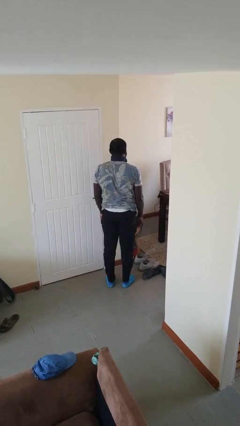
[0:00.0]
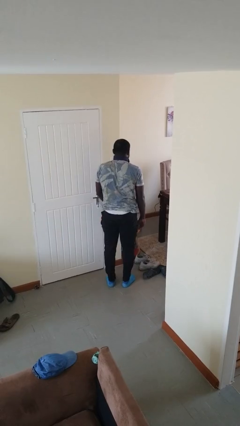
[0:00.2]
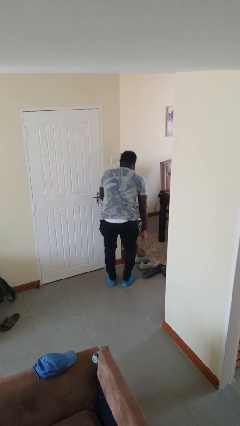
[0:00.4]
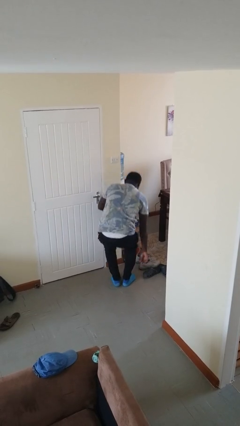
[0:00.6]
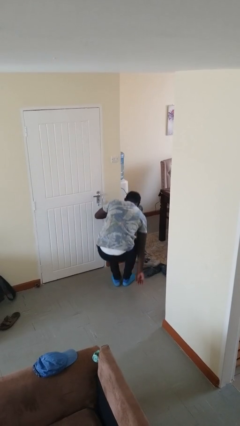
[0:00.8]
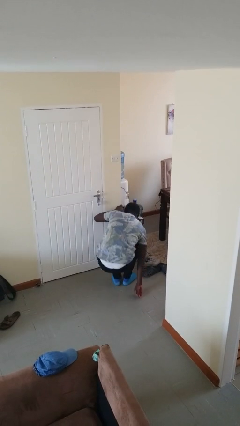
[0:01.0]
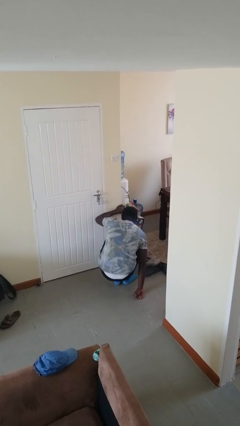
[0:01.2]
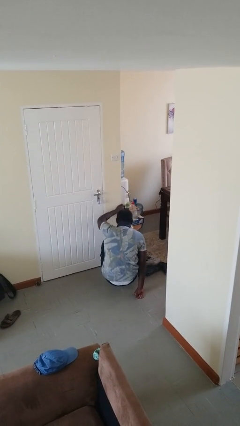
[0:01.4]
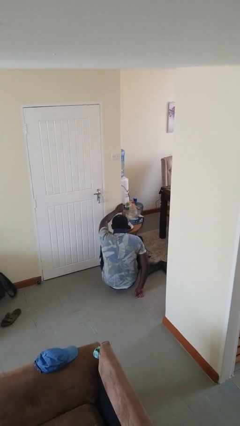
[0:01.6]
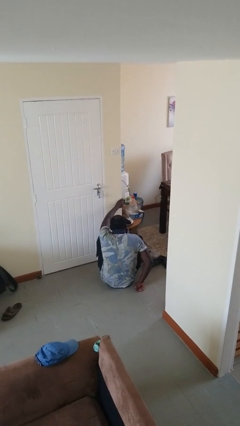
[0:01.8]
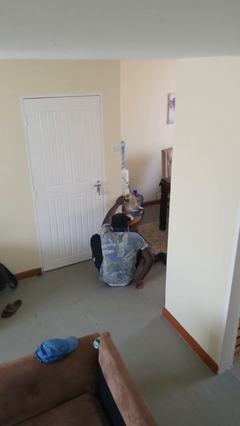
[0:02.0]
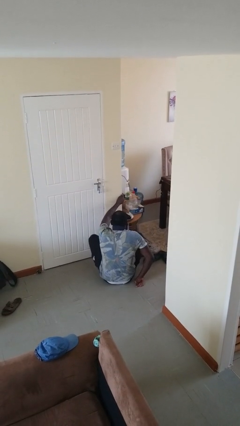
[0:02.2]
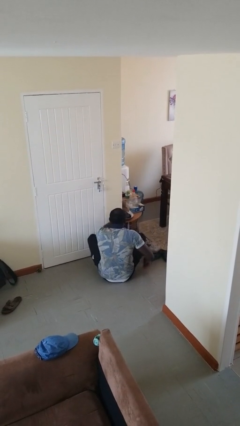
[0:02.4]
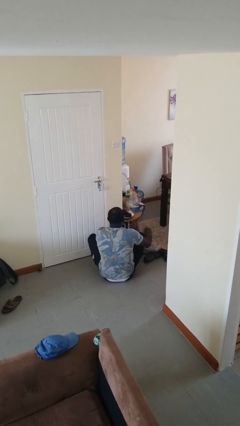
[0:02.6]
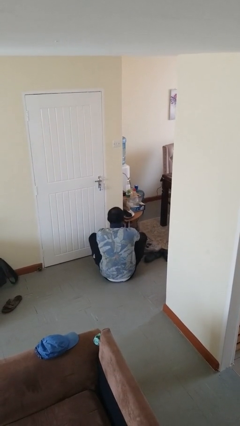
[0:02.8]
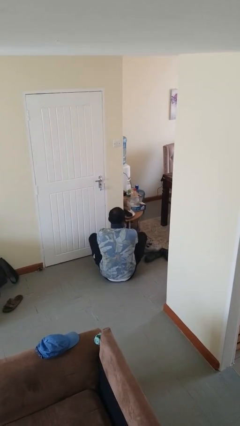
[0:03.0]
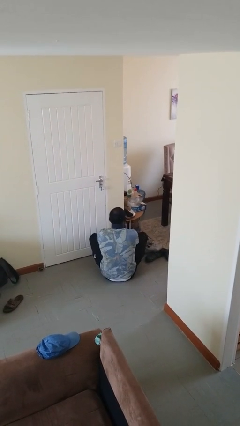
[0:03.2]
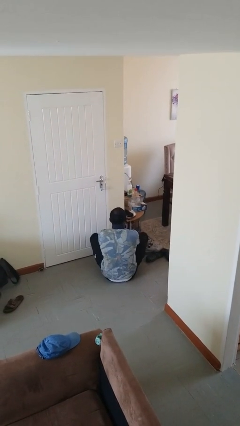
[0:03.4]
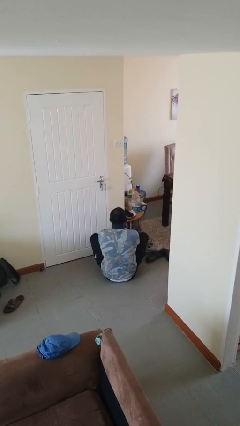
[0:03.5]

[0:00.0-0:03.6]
person sits crisscross

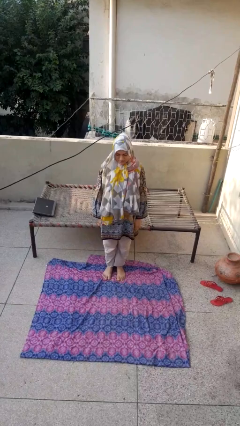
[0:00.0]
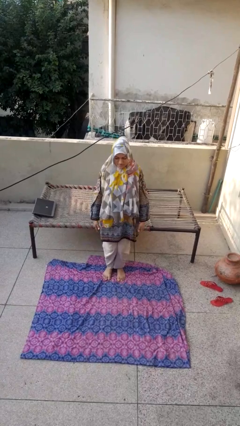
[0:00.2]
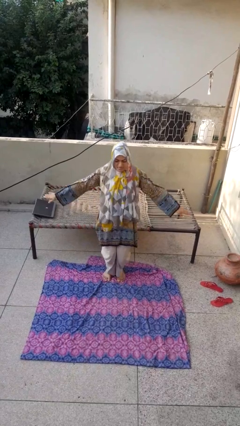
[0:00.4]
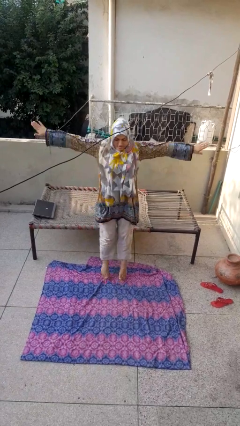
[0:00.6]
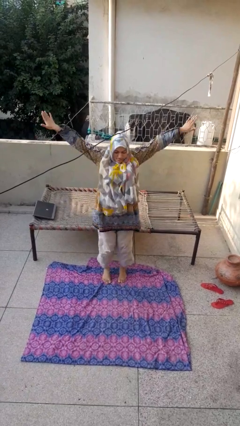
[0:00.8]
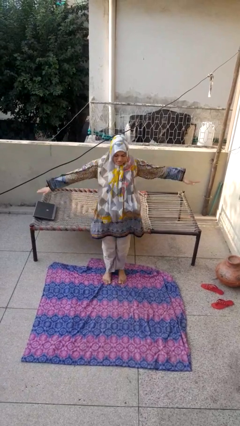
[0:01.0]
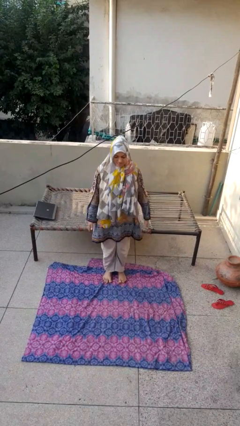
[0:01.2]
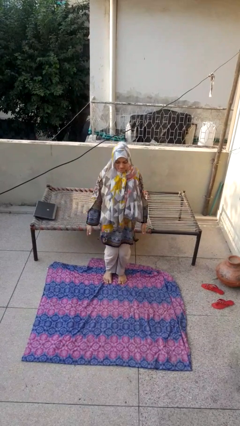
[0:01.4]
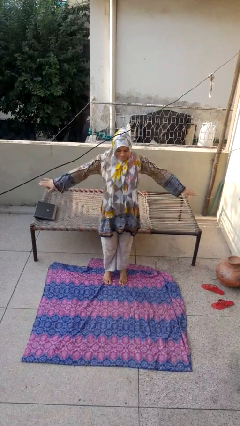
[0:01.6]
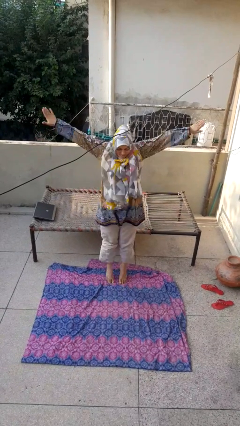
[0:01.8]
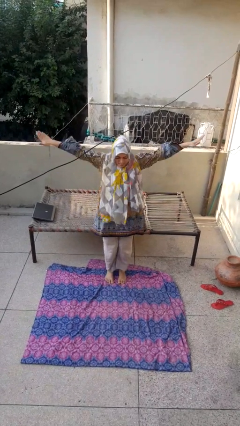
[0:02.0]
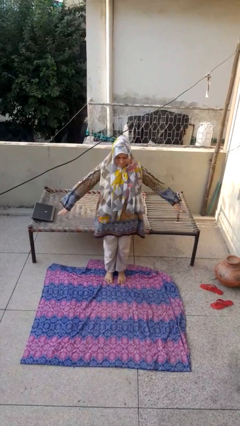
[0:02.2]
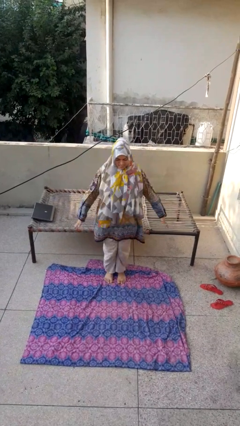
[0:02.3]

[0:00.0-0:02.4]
person exercises with jumping jacks

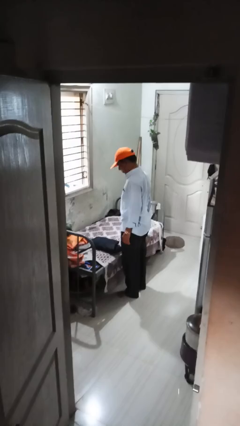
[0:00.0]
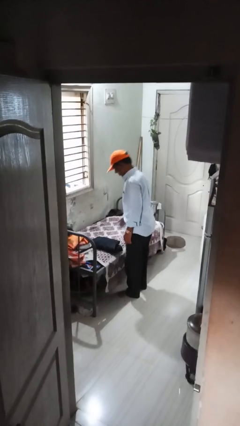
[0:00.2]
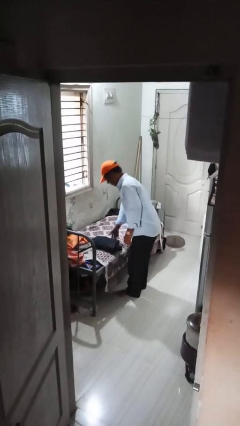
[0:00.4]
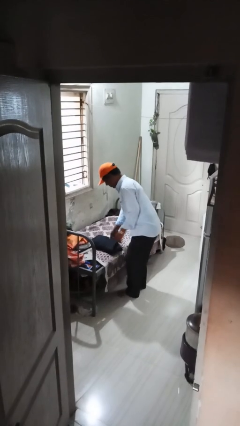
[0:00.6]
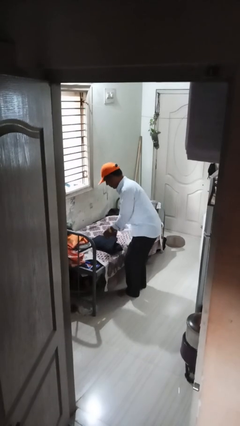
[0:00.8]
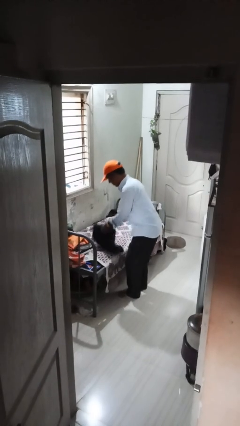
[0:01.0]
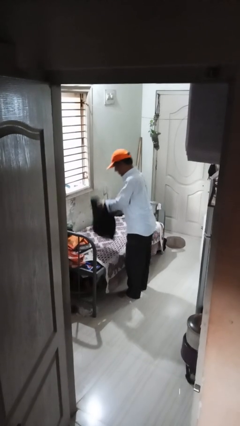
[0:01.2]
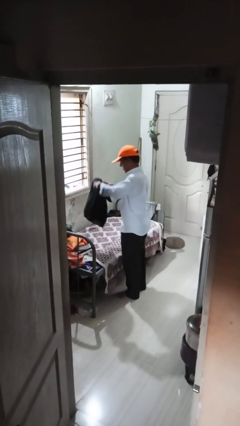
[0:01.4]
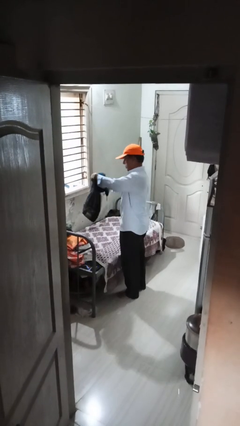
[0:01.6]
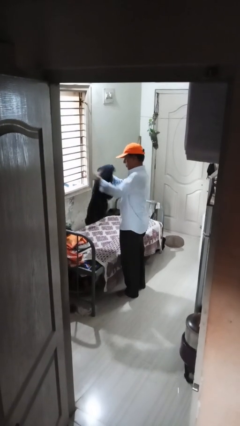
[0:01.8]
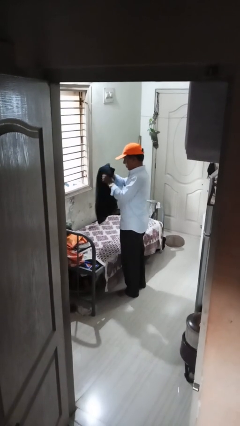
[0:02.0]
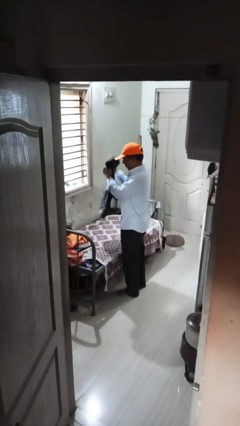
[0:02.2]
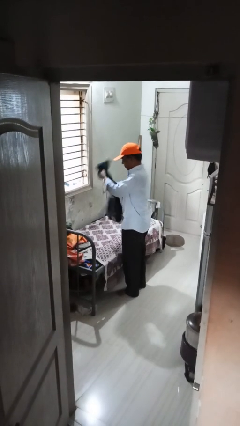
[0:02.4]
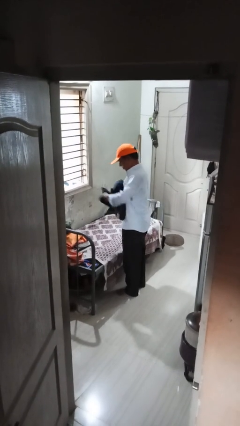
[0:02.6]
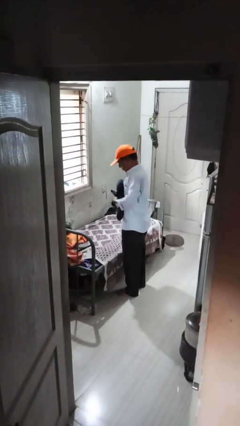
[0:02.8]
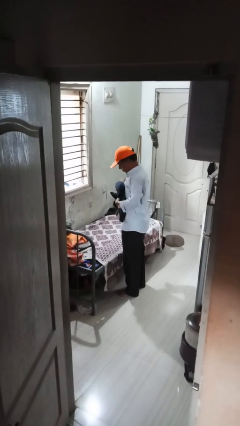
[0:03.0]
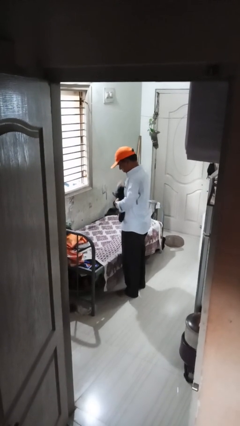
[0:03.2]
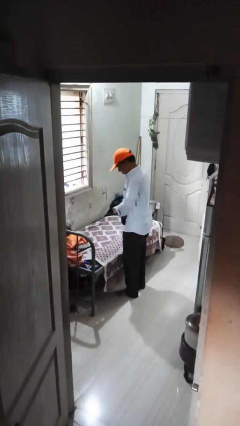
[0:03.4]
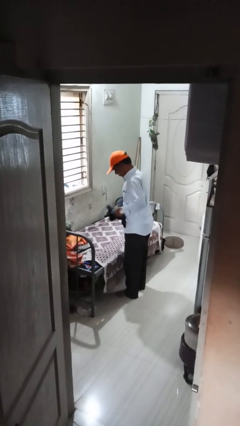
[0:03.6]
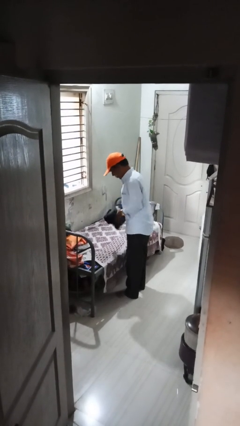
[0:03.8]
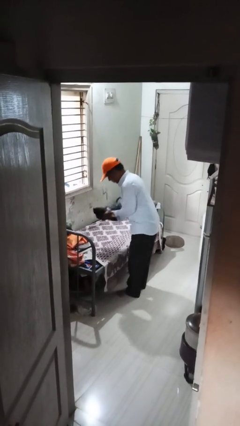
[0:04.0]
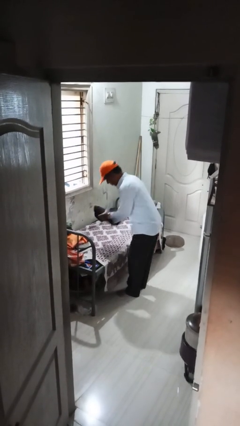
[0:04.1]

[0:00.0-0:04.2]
person folds pants

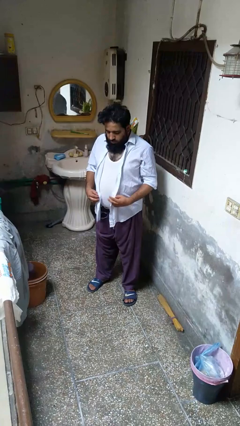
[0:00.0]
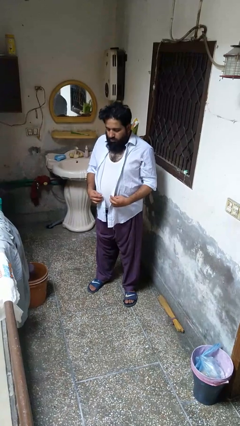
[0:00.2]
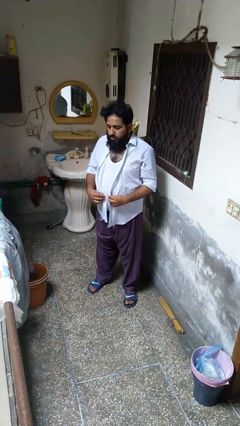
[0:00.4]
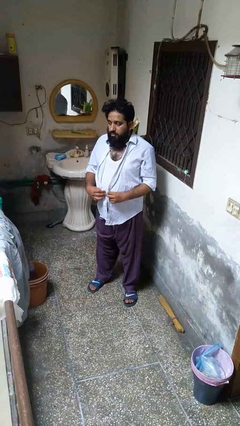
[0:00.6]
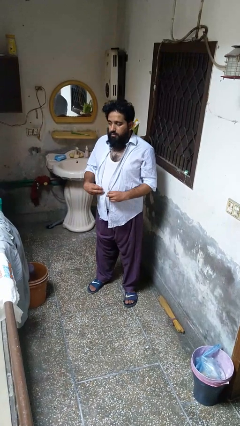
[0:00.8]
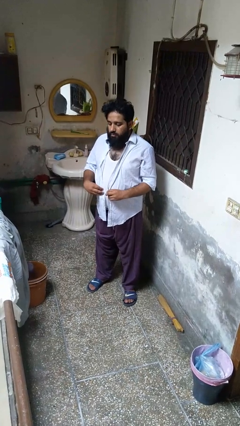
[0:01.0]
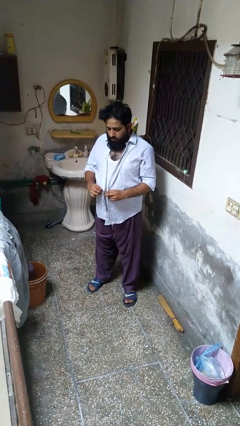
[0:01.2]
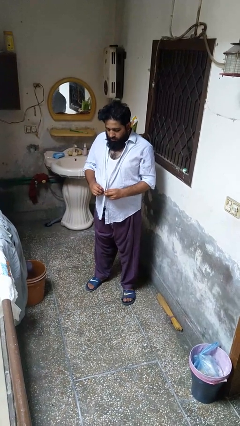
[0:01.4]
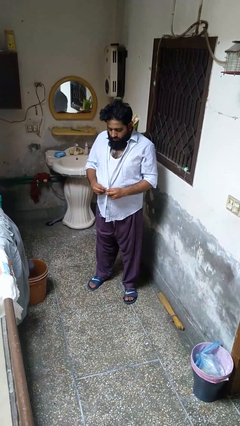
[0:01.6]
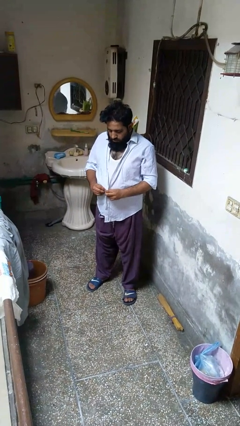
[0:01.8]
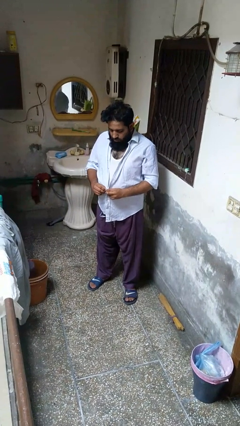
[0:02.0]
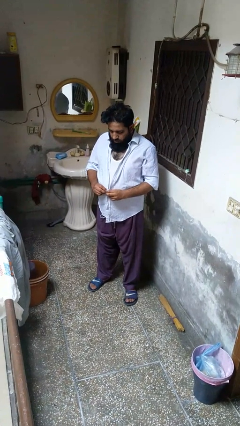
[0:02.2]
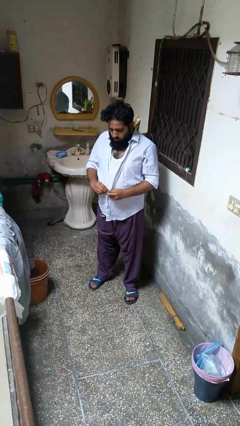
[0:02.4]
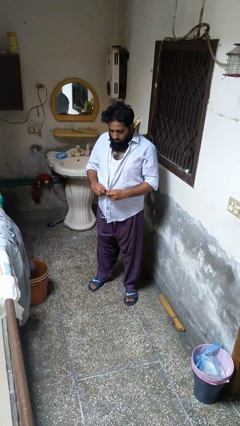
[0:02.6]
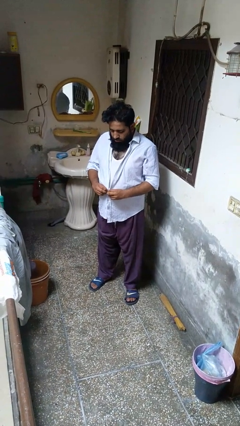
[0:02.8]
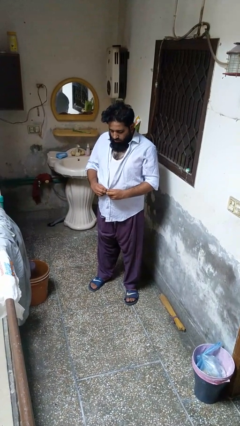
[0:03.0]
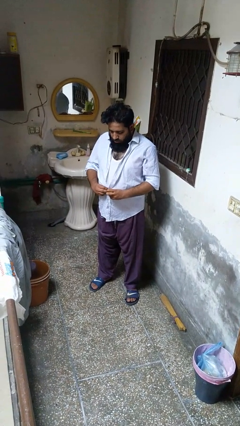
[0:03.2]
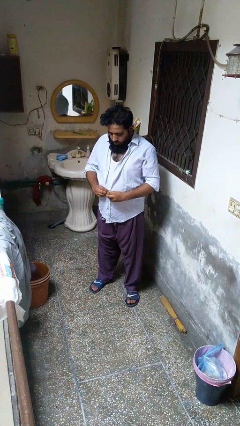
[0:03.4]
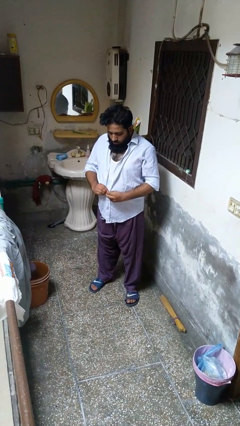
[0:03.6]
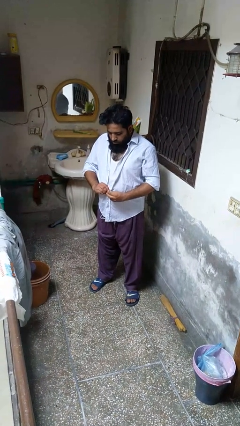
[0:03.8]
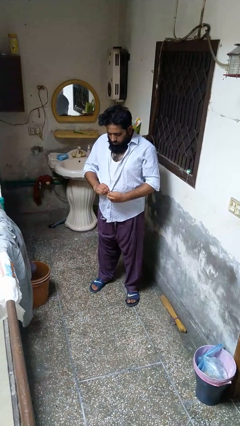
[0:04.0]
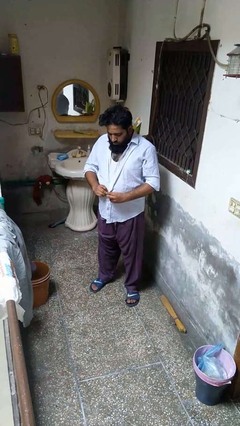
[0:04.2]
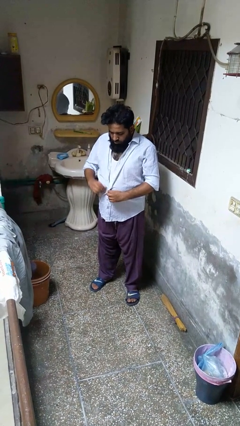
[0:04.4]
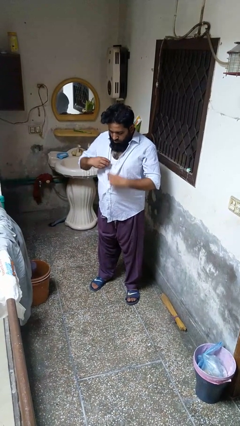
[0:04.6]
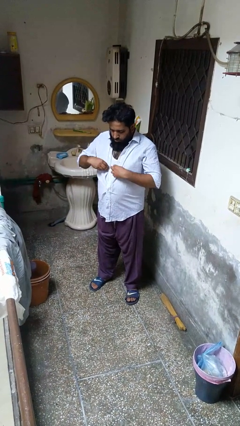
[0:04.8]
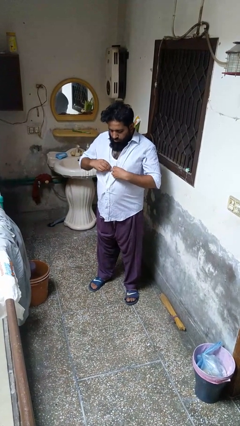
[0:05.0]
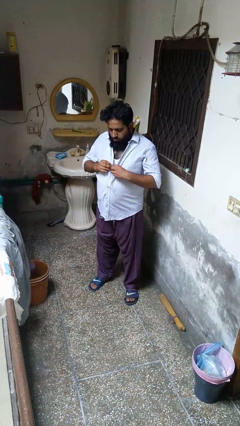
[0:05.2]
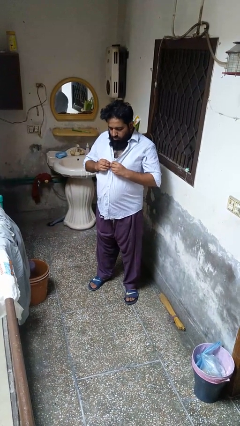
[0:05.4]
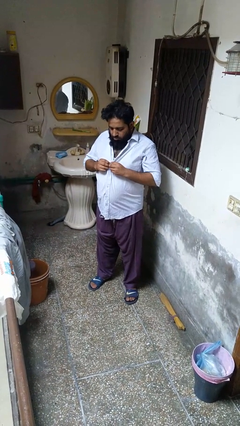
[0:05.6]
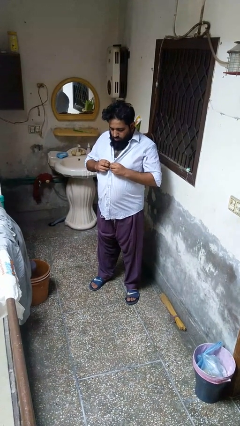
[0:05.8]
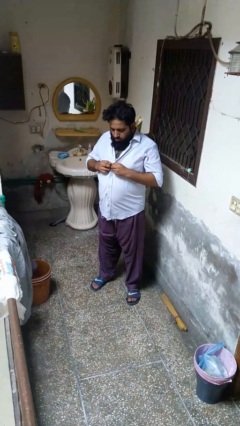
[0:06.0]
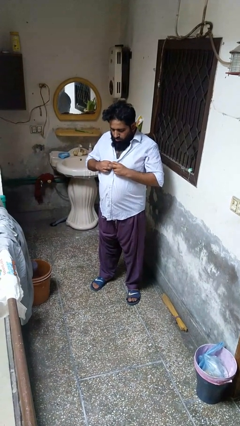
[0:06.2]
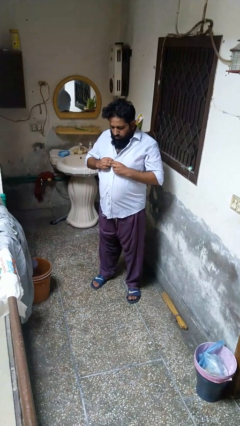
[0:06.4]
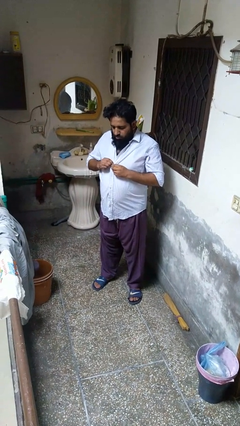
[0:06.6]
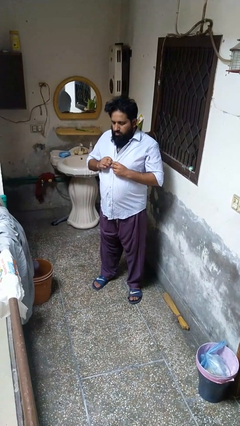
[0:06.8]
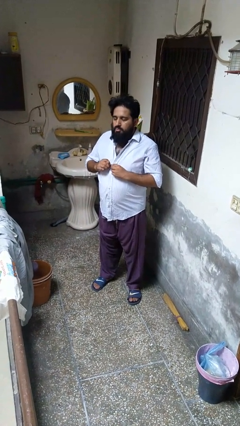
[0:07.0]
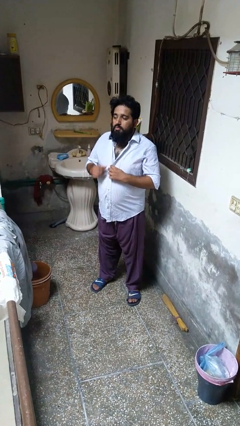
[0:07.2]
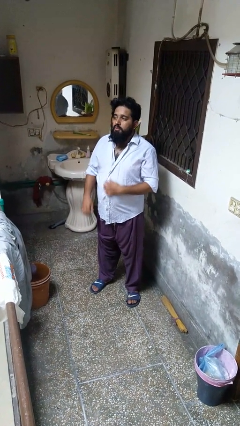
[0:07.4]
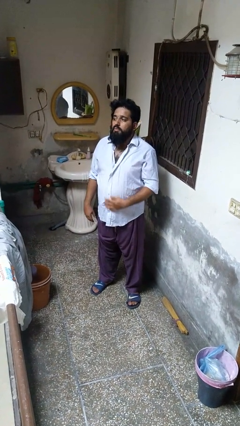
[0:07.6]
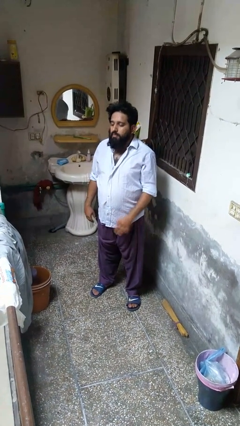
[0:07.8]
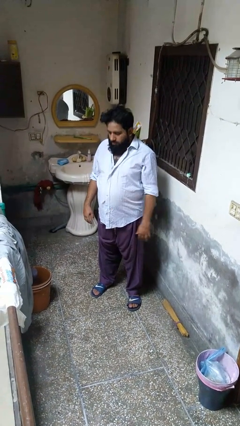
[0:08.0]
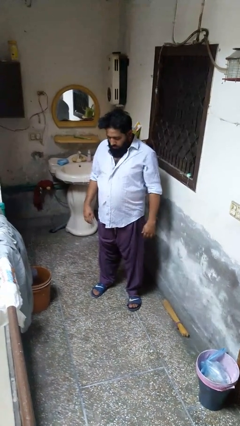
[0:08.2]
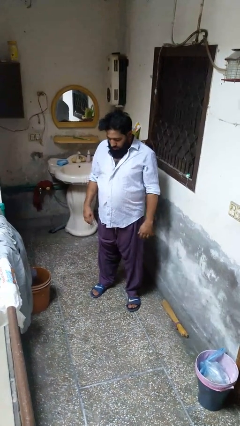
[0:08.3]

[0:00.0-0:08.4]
person buttons shirt
